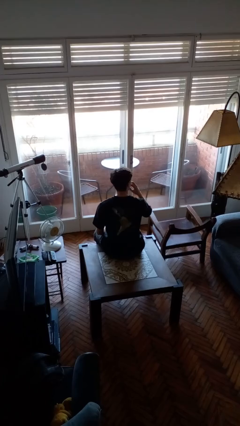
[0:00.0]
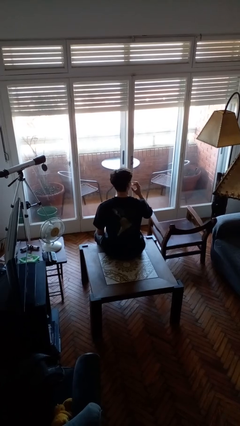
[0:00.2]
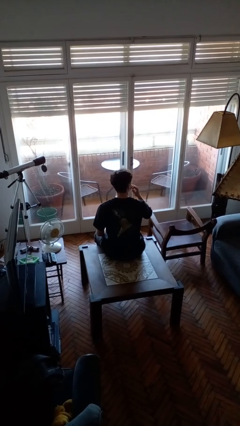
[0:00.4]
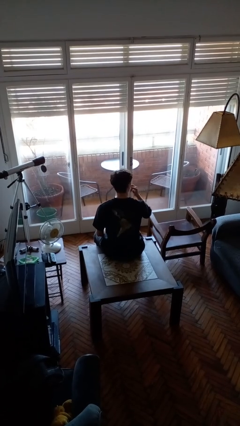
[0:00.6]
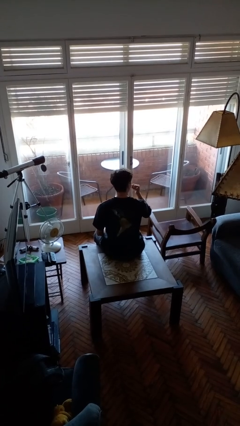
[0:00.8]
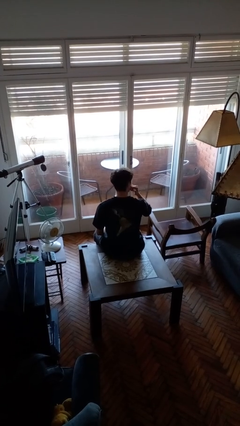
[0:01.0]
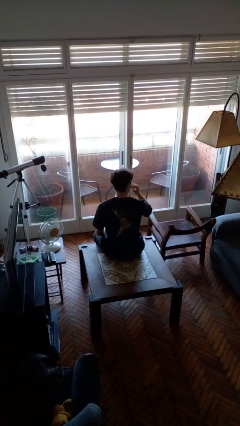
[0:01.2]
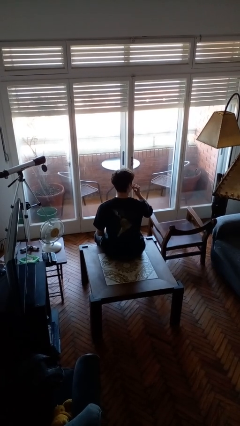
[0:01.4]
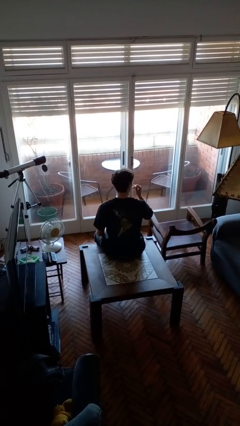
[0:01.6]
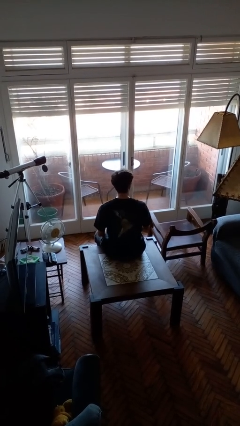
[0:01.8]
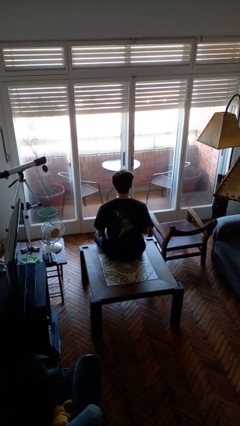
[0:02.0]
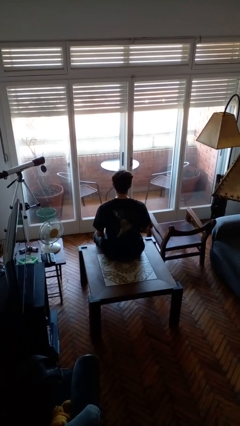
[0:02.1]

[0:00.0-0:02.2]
person licks fingers

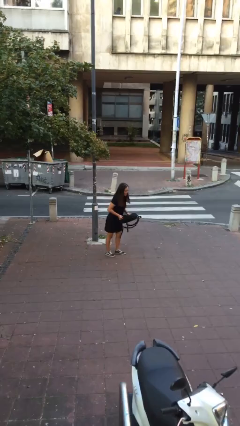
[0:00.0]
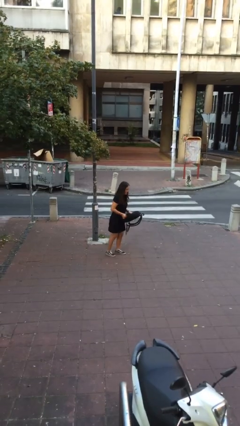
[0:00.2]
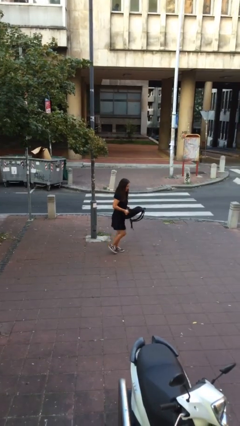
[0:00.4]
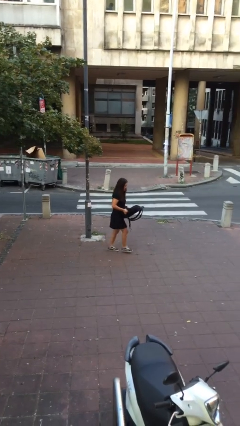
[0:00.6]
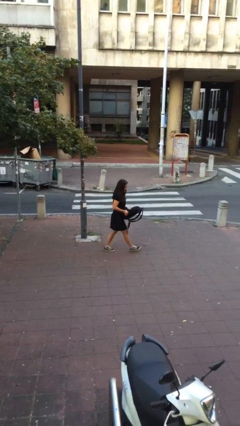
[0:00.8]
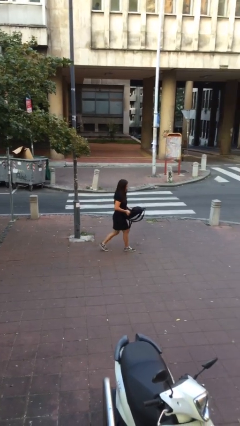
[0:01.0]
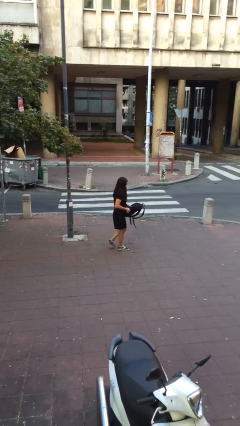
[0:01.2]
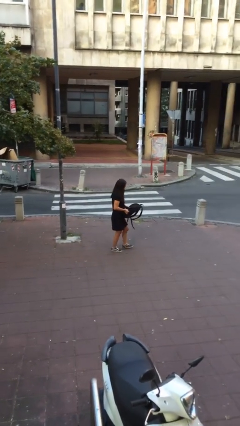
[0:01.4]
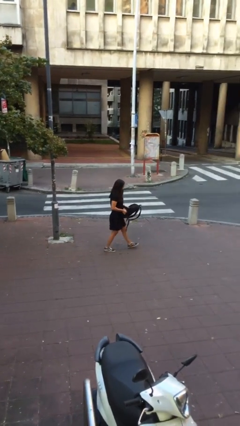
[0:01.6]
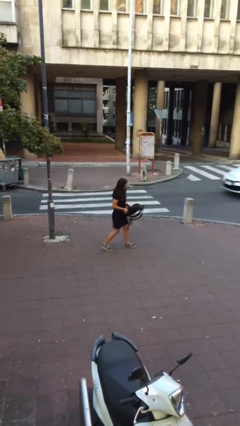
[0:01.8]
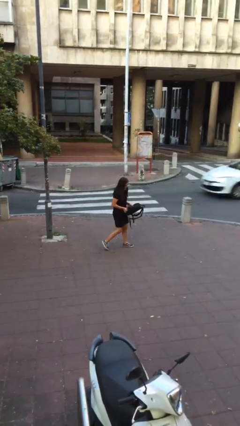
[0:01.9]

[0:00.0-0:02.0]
person carries heavy object

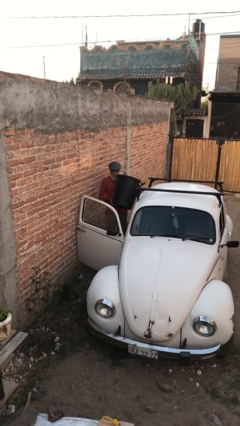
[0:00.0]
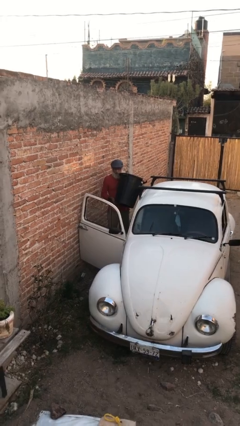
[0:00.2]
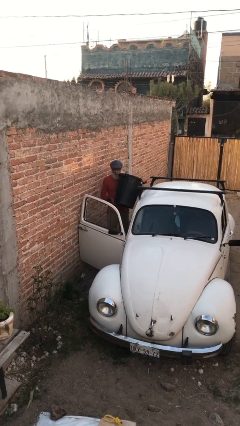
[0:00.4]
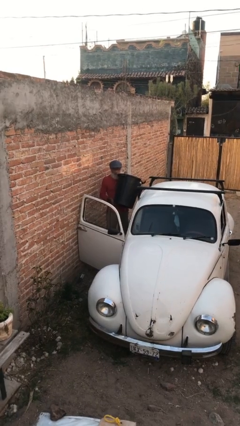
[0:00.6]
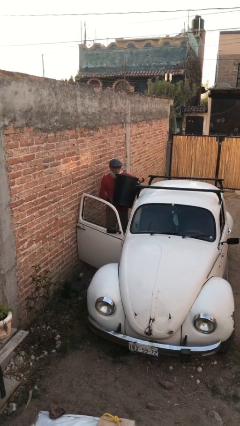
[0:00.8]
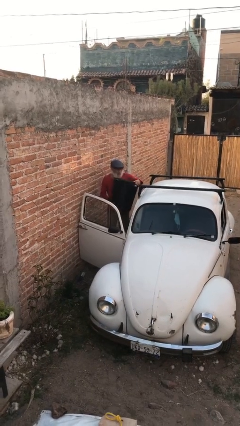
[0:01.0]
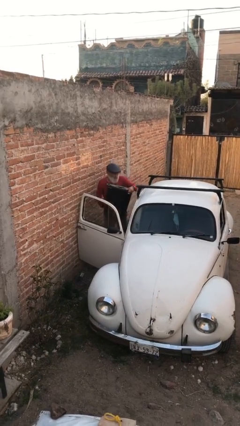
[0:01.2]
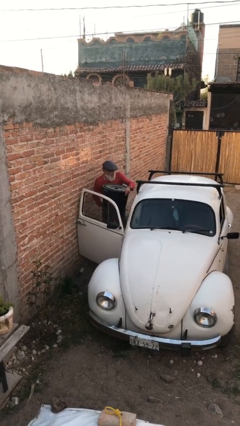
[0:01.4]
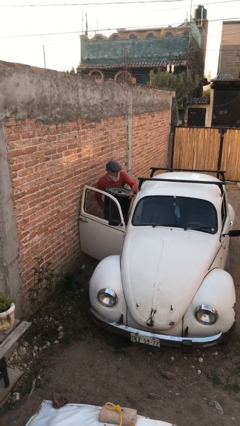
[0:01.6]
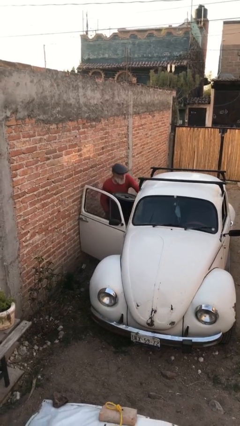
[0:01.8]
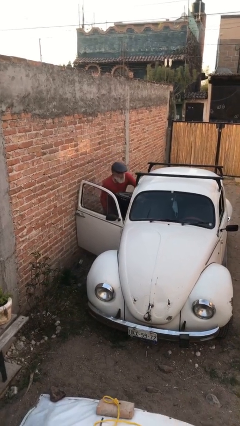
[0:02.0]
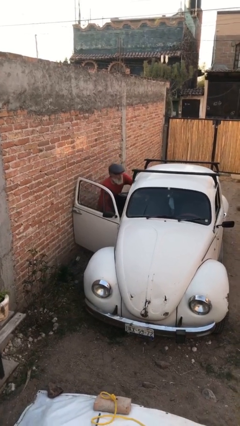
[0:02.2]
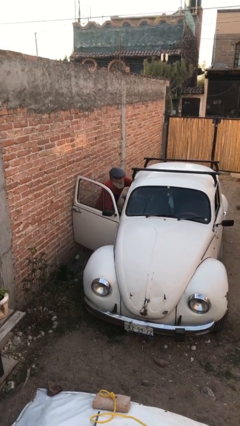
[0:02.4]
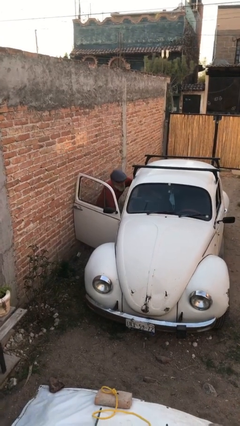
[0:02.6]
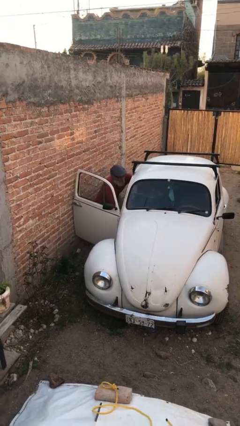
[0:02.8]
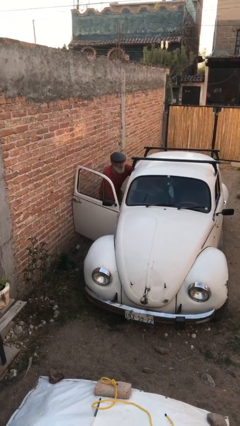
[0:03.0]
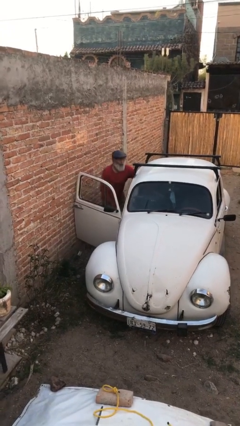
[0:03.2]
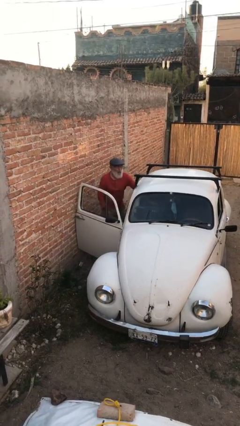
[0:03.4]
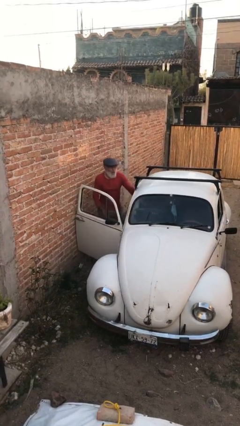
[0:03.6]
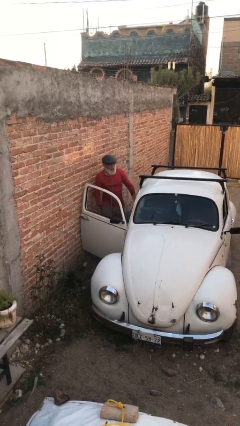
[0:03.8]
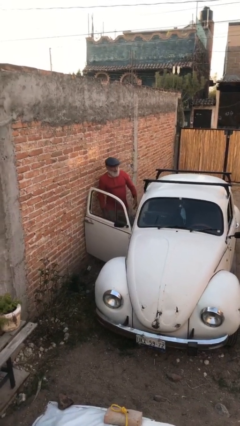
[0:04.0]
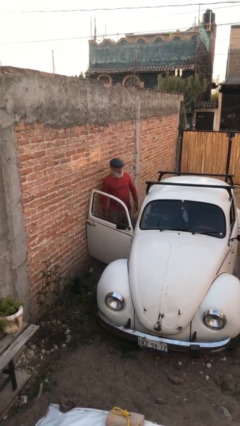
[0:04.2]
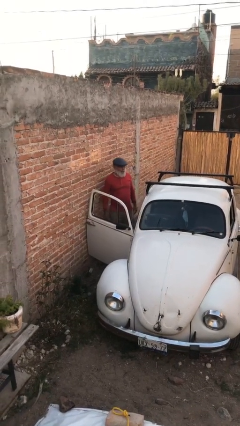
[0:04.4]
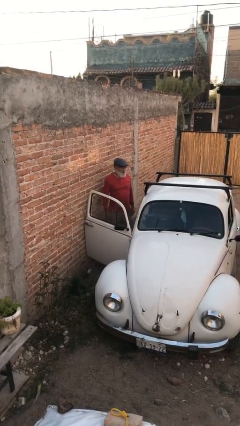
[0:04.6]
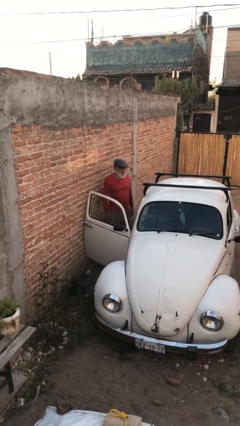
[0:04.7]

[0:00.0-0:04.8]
person loads car

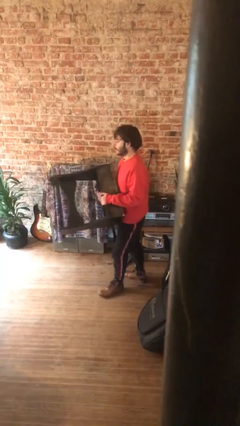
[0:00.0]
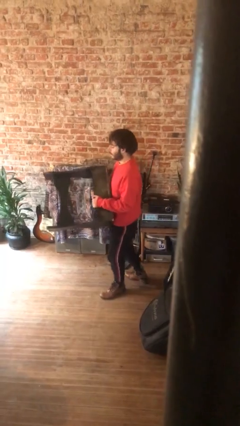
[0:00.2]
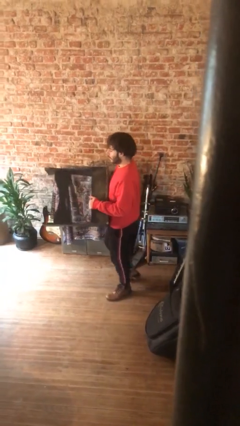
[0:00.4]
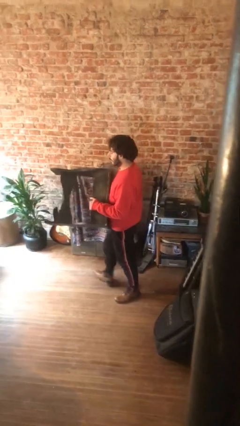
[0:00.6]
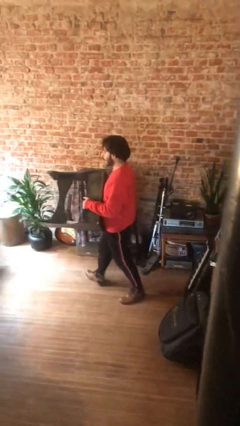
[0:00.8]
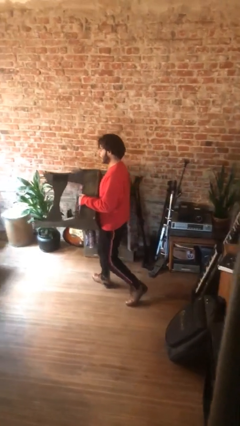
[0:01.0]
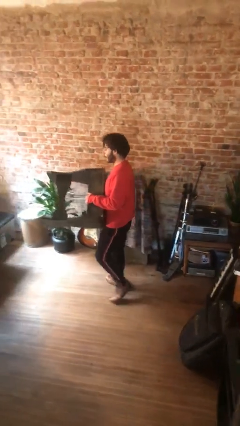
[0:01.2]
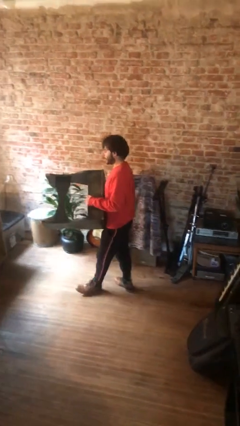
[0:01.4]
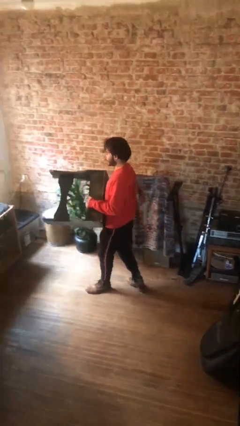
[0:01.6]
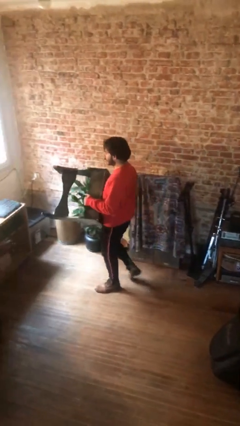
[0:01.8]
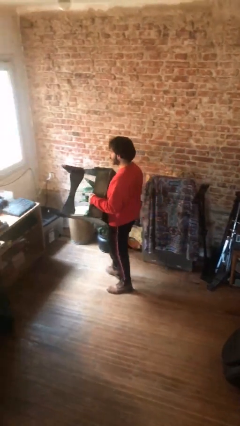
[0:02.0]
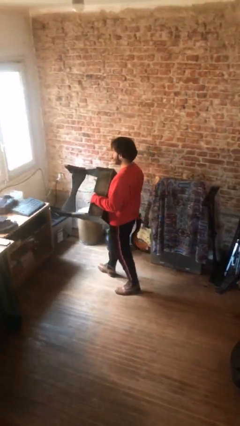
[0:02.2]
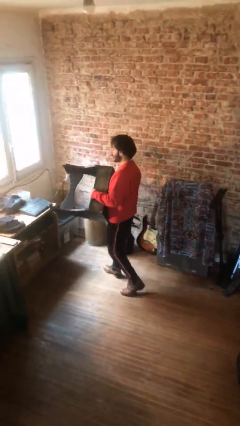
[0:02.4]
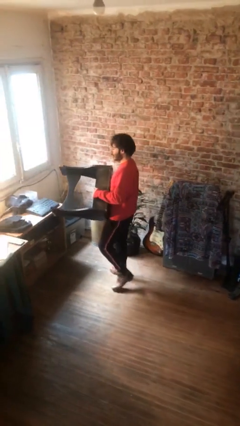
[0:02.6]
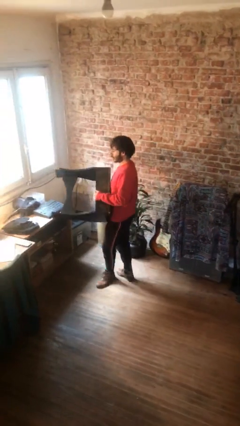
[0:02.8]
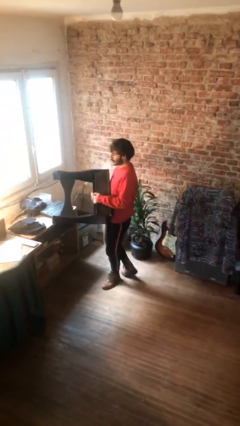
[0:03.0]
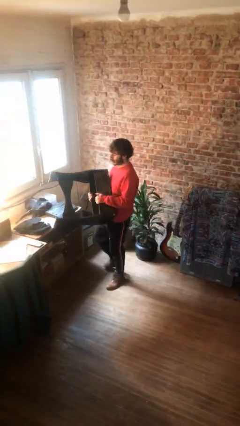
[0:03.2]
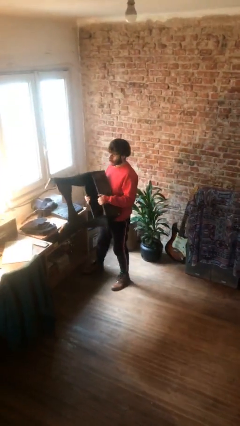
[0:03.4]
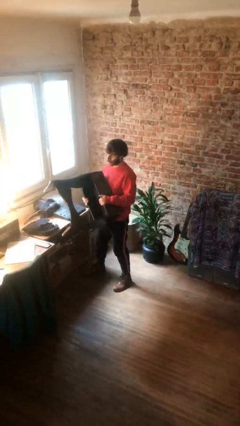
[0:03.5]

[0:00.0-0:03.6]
person carries furniture

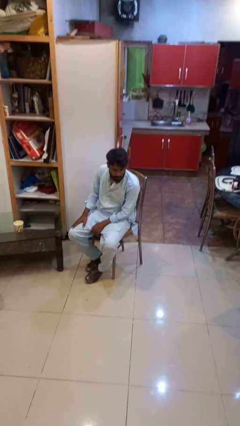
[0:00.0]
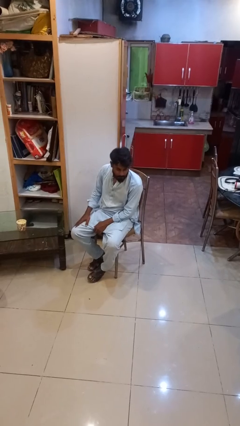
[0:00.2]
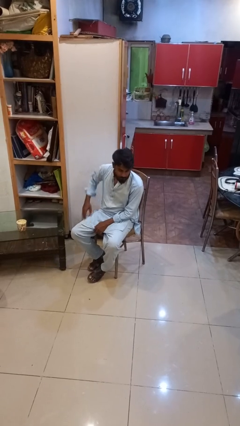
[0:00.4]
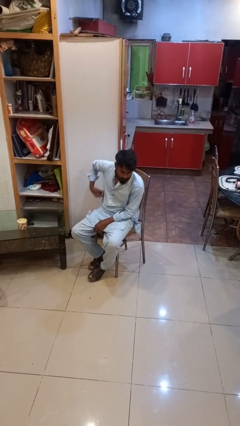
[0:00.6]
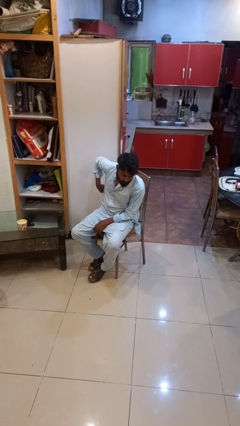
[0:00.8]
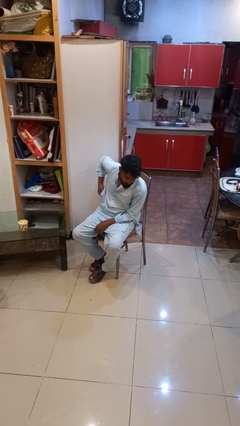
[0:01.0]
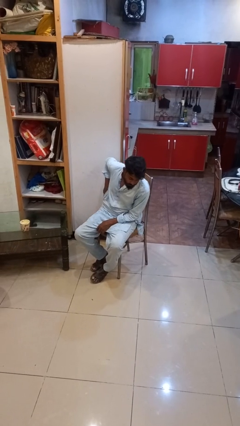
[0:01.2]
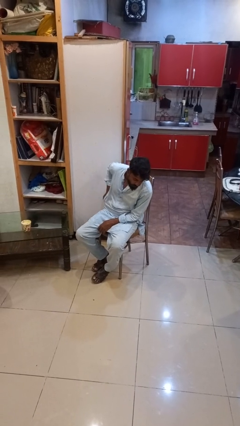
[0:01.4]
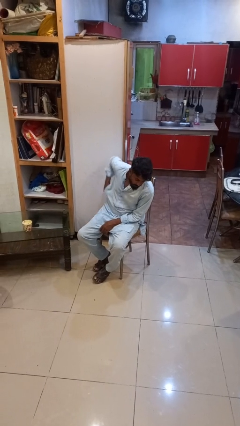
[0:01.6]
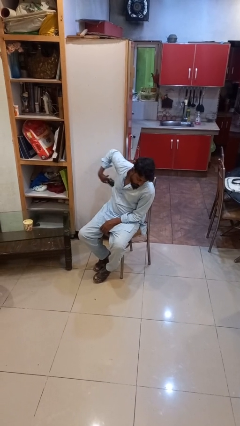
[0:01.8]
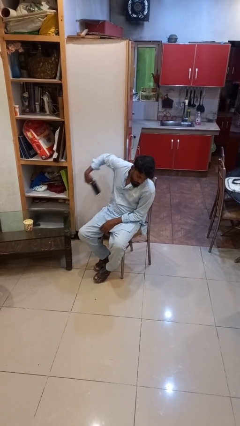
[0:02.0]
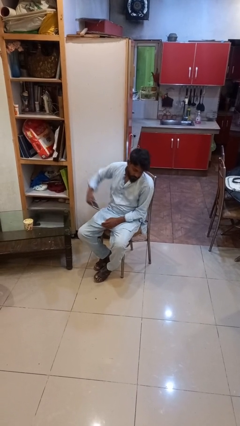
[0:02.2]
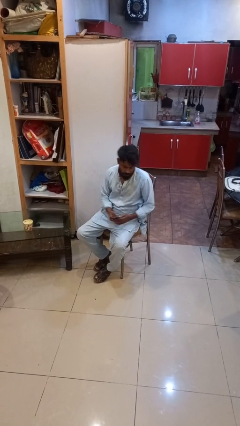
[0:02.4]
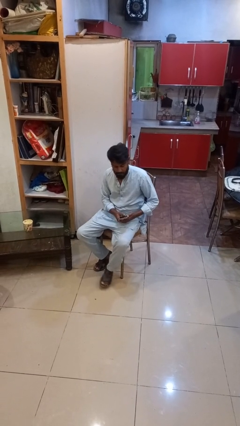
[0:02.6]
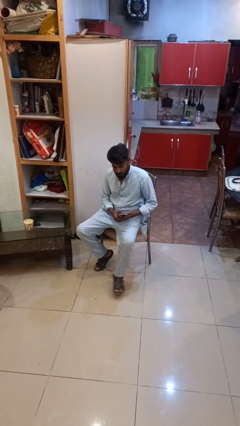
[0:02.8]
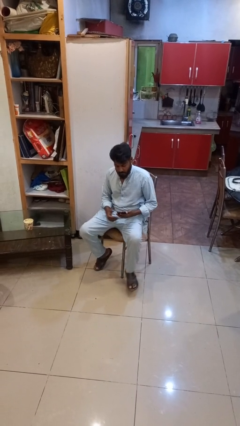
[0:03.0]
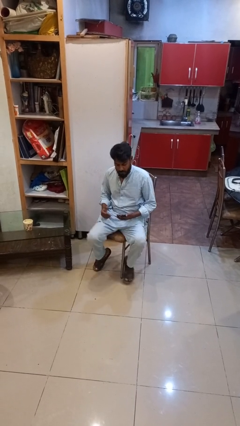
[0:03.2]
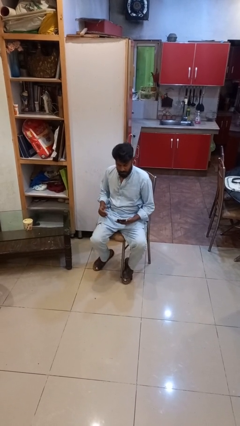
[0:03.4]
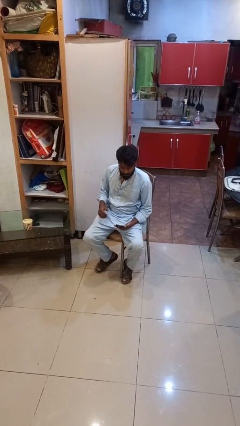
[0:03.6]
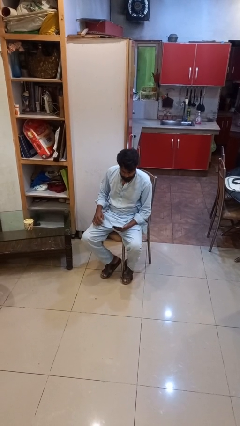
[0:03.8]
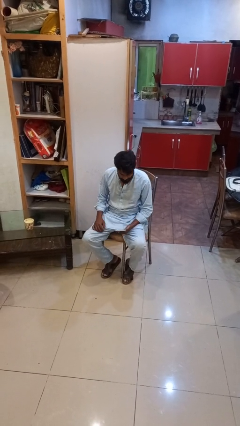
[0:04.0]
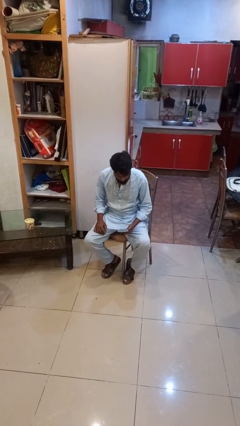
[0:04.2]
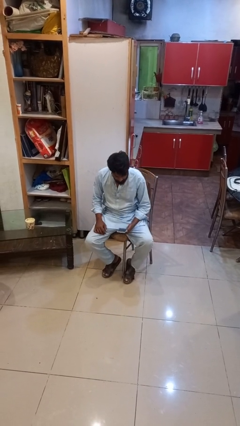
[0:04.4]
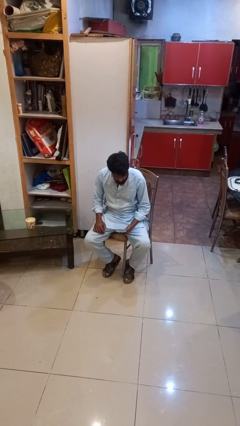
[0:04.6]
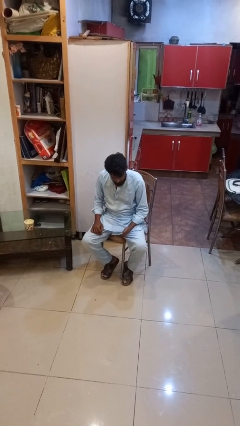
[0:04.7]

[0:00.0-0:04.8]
person takes phone from pocket

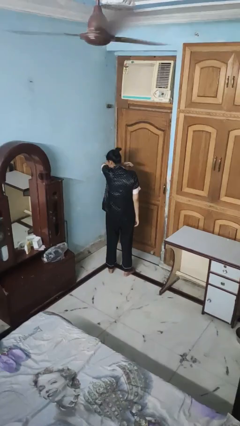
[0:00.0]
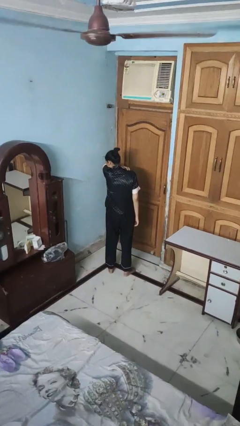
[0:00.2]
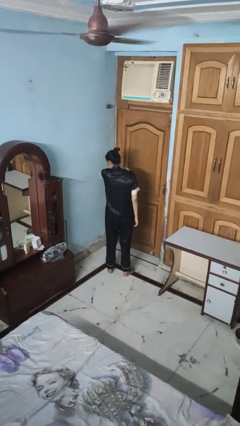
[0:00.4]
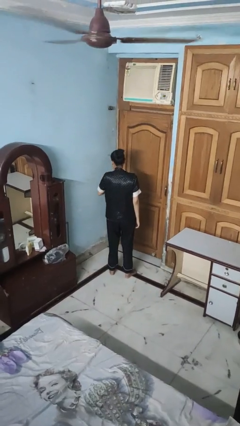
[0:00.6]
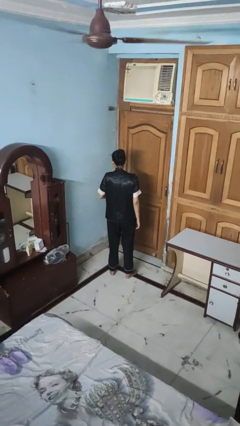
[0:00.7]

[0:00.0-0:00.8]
person sneezes into arm
